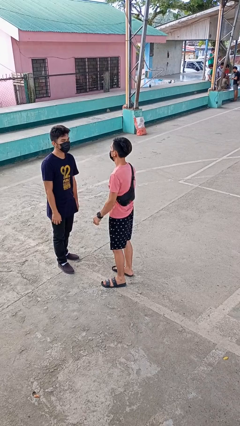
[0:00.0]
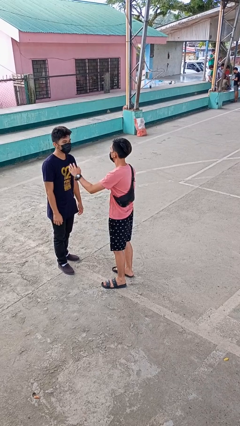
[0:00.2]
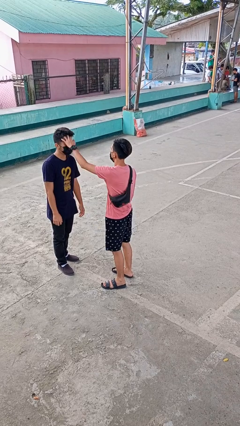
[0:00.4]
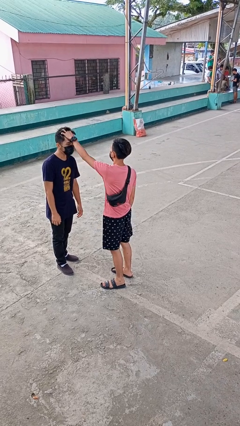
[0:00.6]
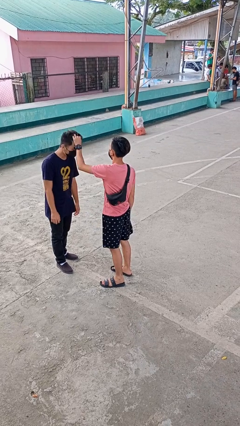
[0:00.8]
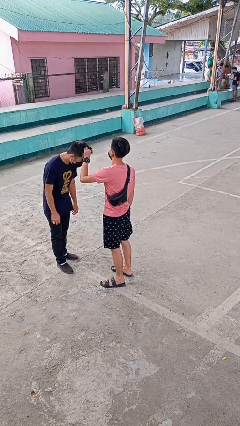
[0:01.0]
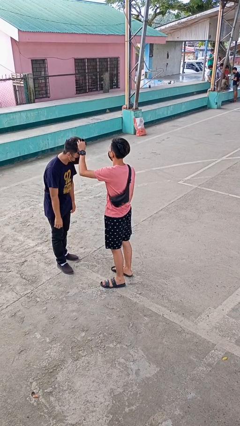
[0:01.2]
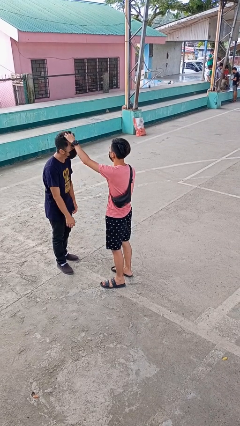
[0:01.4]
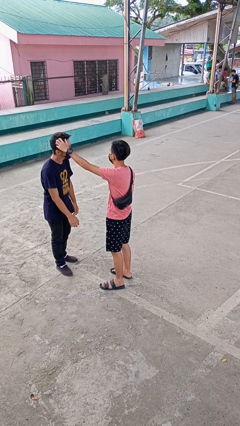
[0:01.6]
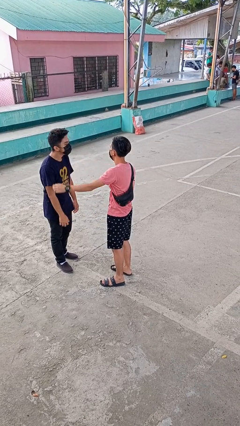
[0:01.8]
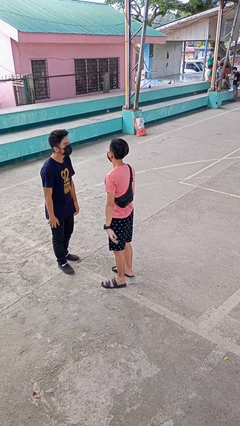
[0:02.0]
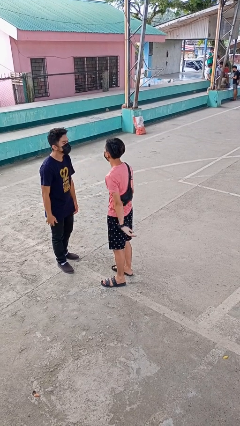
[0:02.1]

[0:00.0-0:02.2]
person grabs person by hair

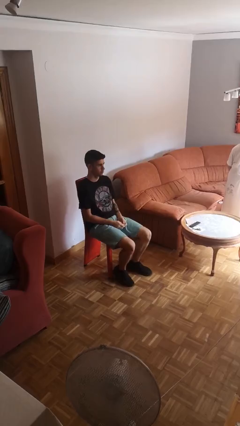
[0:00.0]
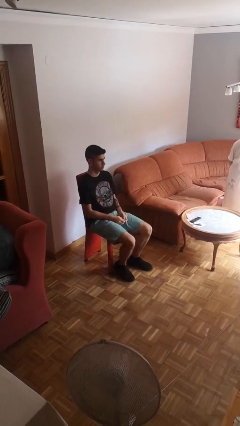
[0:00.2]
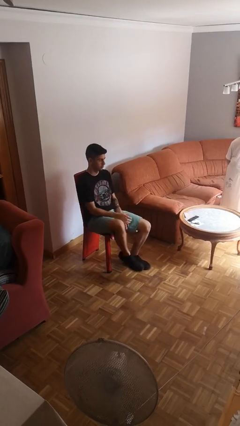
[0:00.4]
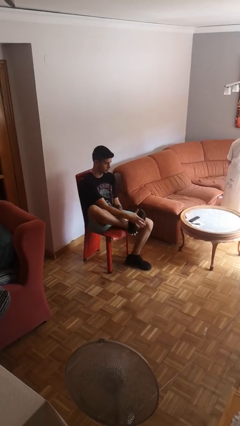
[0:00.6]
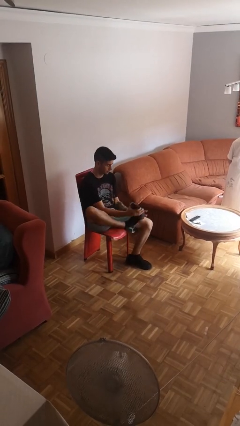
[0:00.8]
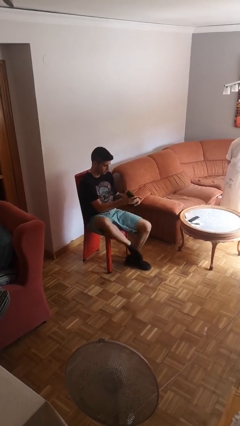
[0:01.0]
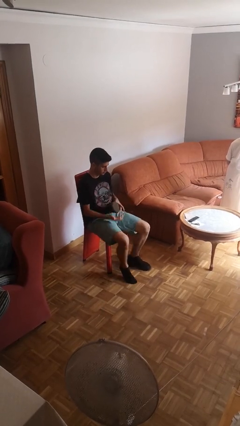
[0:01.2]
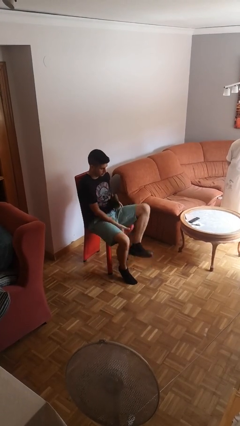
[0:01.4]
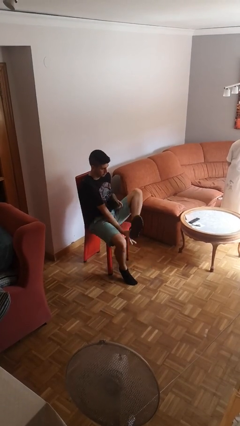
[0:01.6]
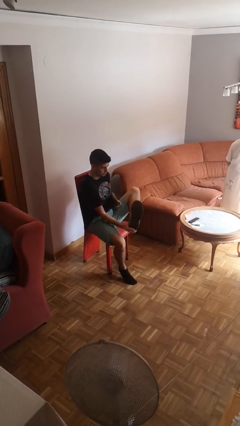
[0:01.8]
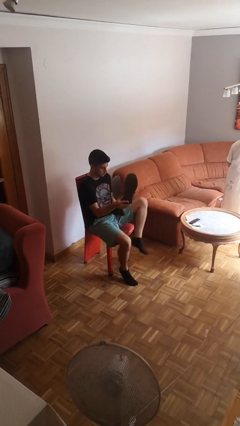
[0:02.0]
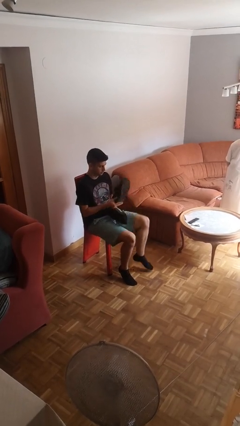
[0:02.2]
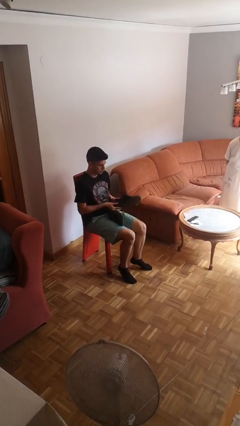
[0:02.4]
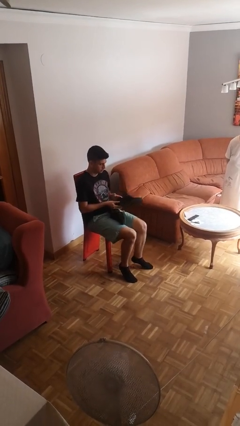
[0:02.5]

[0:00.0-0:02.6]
person takes off shoes

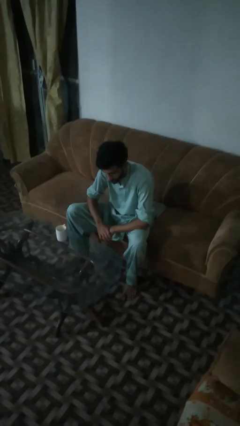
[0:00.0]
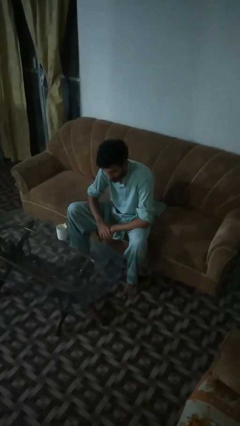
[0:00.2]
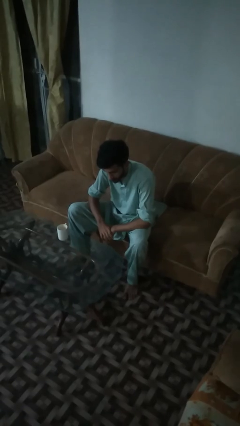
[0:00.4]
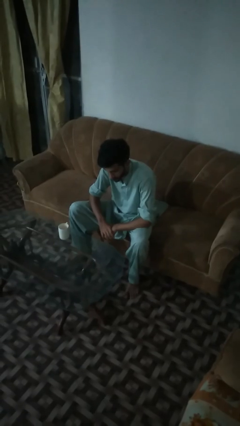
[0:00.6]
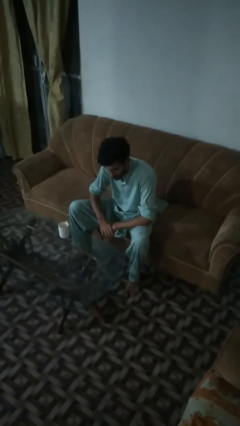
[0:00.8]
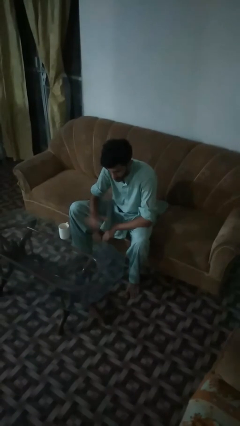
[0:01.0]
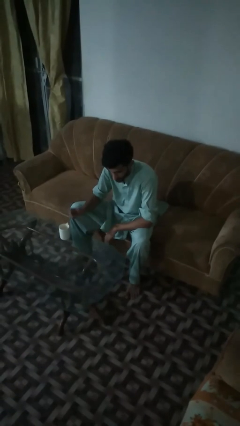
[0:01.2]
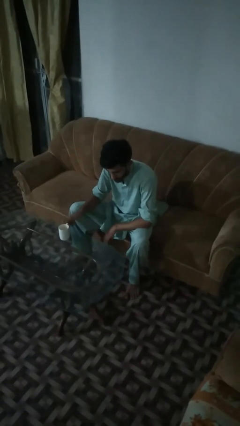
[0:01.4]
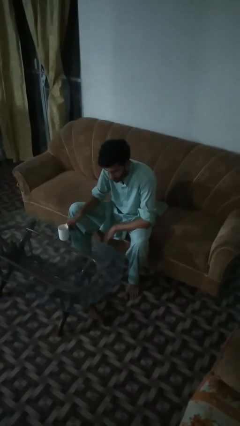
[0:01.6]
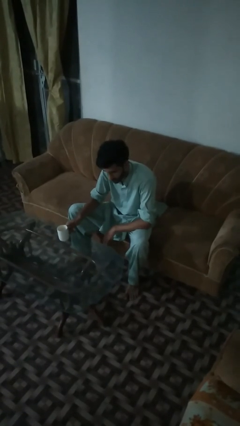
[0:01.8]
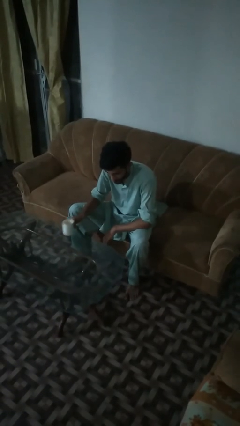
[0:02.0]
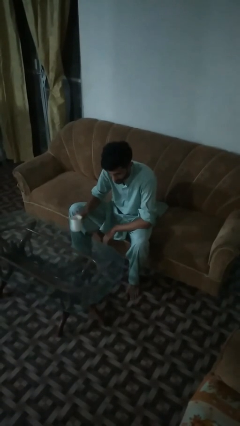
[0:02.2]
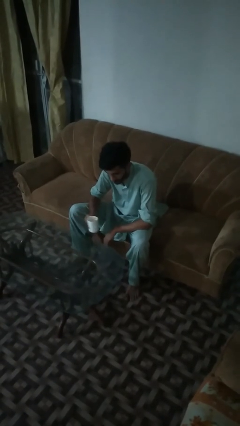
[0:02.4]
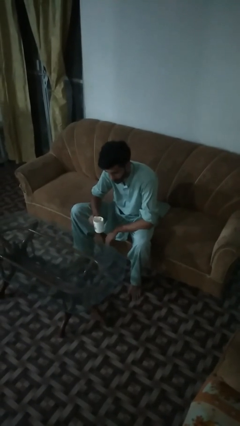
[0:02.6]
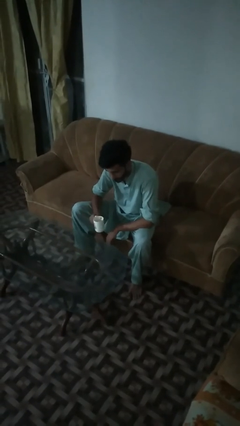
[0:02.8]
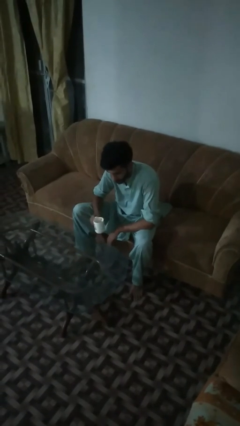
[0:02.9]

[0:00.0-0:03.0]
person picks up object from table

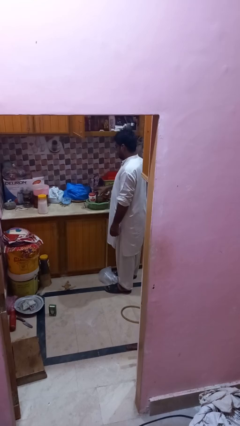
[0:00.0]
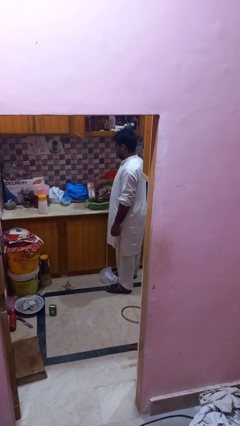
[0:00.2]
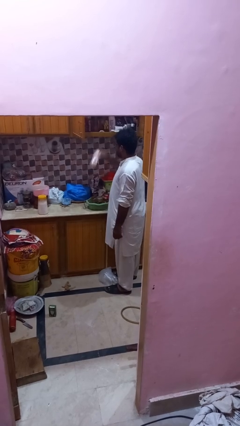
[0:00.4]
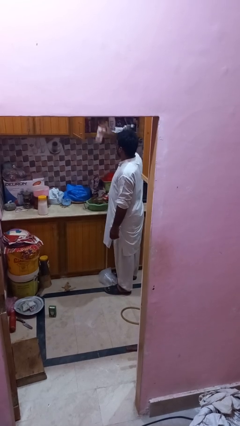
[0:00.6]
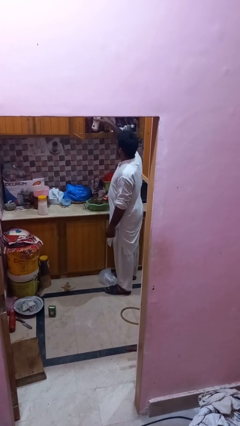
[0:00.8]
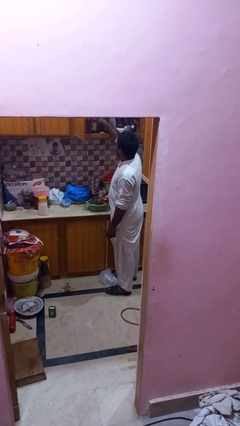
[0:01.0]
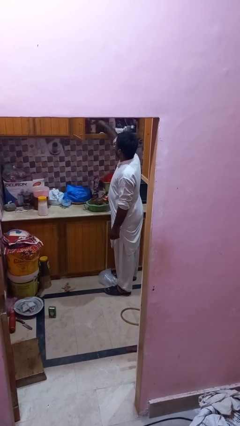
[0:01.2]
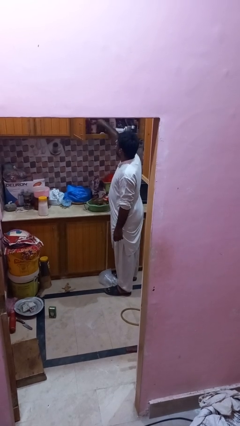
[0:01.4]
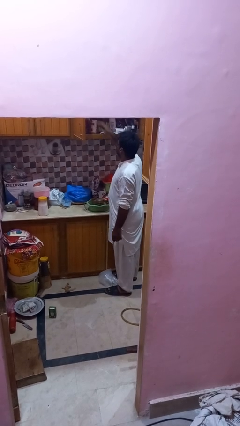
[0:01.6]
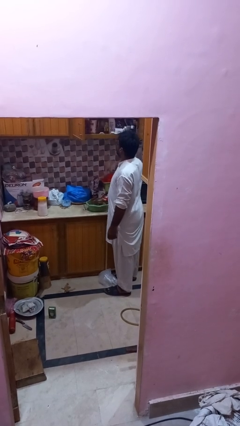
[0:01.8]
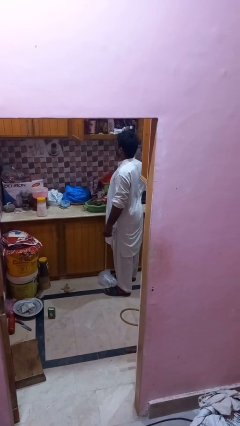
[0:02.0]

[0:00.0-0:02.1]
person loads groceries into cabinet

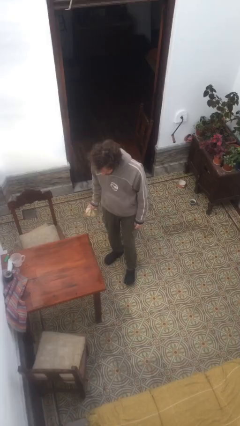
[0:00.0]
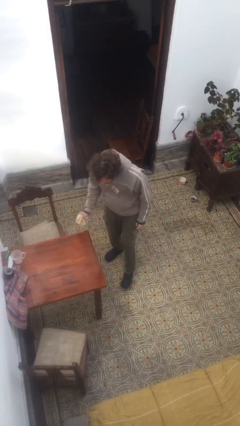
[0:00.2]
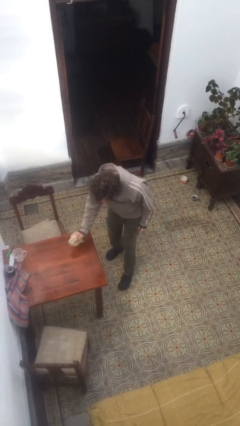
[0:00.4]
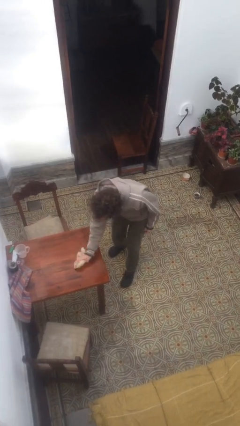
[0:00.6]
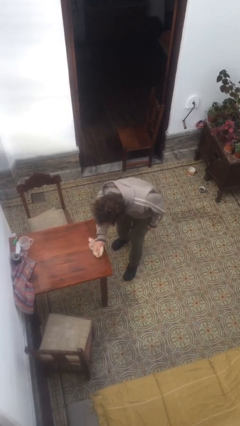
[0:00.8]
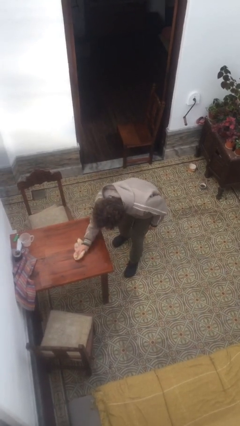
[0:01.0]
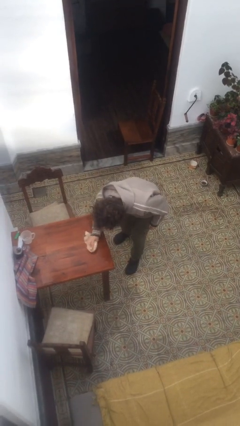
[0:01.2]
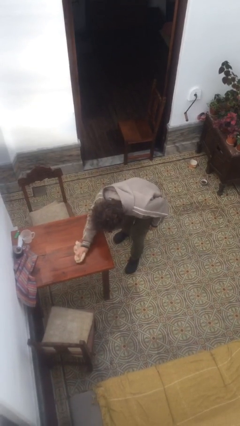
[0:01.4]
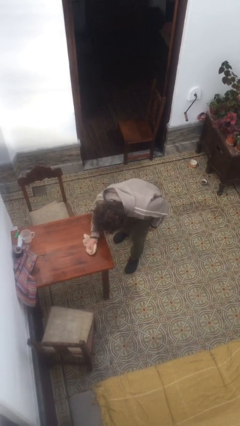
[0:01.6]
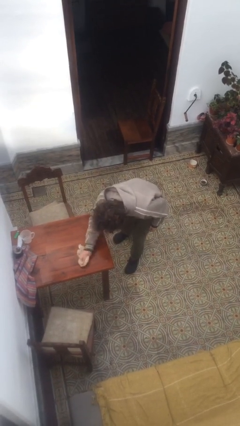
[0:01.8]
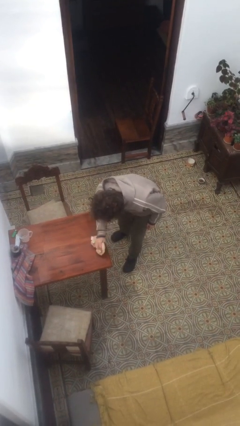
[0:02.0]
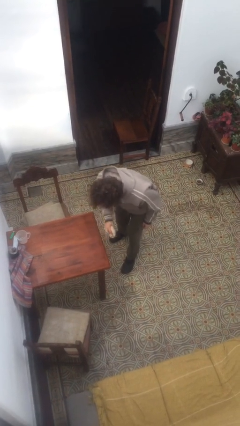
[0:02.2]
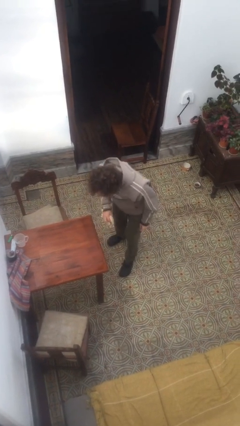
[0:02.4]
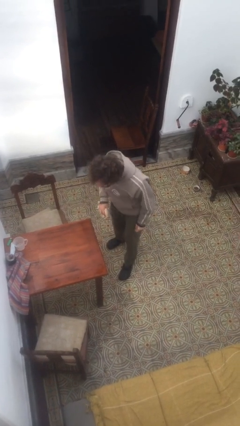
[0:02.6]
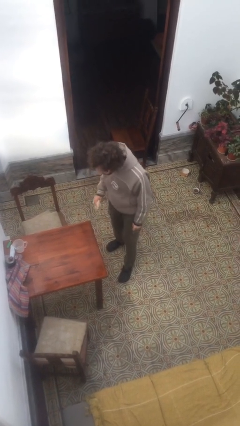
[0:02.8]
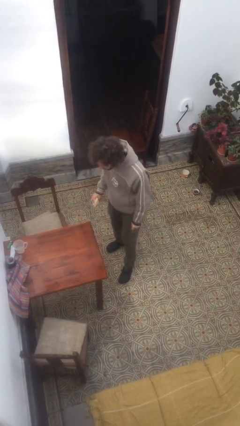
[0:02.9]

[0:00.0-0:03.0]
person cleans table with rag

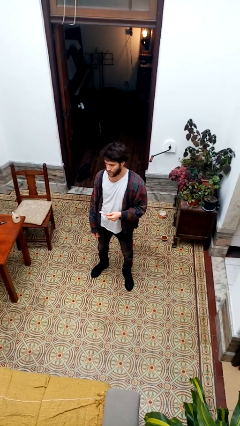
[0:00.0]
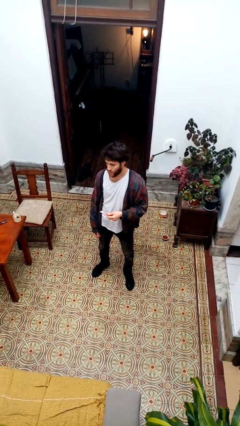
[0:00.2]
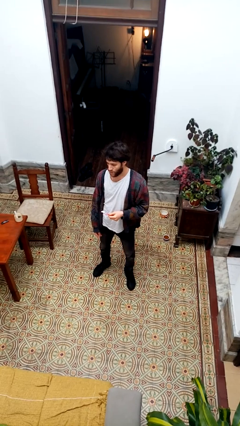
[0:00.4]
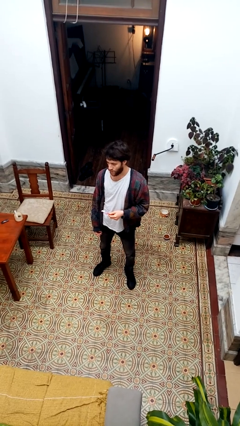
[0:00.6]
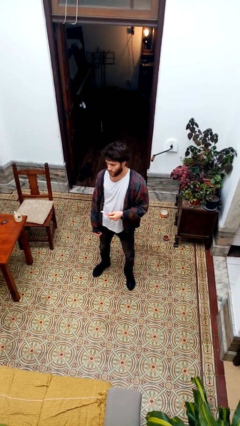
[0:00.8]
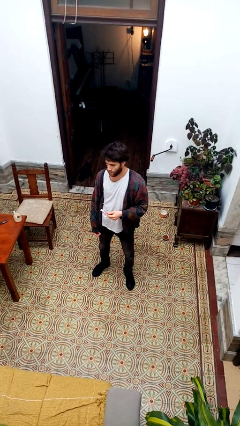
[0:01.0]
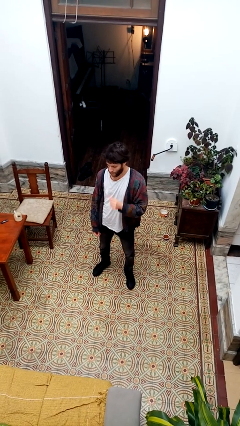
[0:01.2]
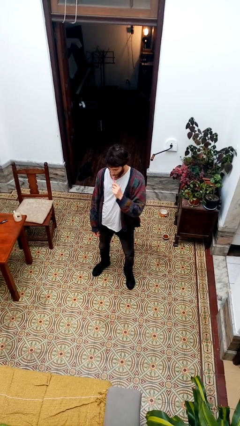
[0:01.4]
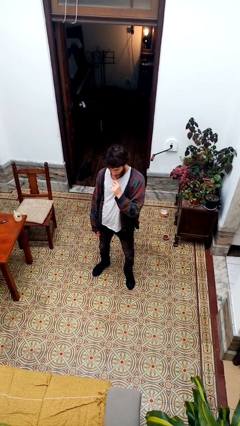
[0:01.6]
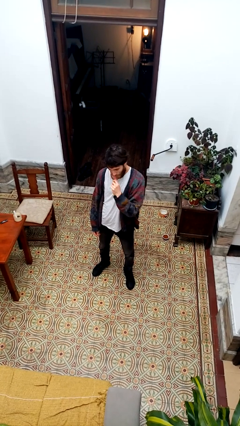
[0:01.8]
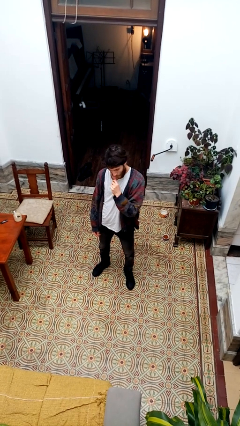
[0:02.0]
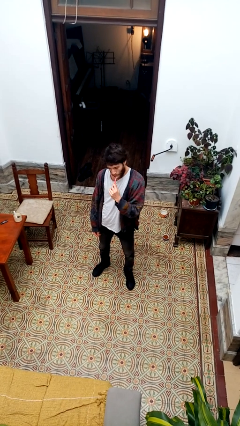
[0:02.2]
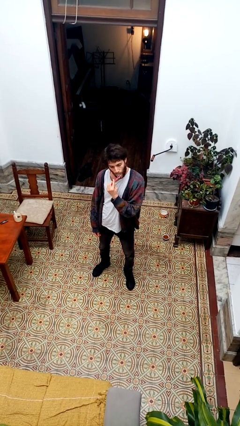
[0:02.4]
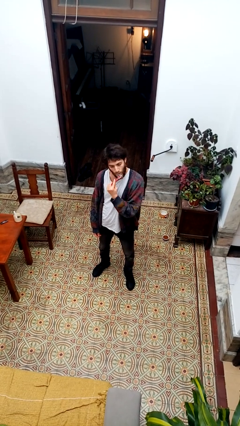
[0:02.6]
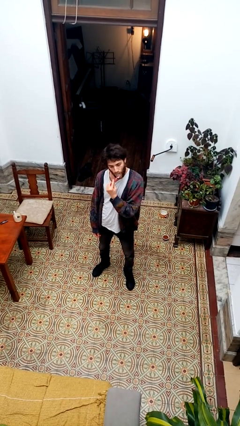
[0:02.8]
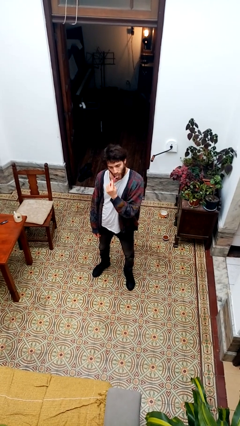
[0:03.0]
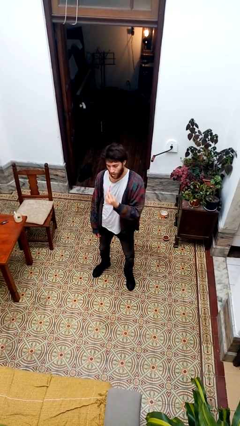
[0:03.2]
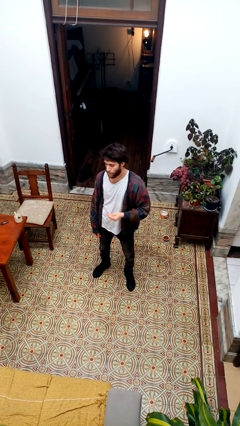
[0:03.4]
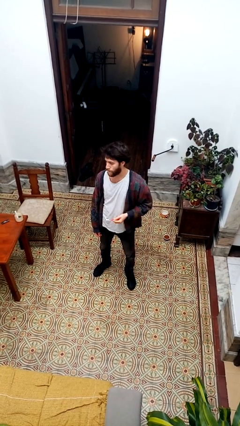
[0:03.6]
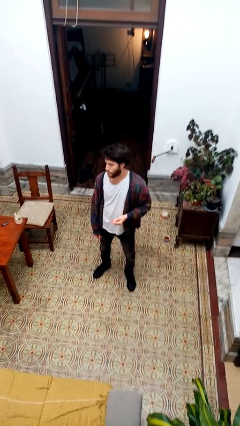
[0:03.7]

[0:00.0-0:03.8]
person brushes teeth

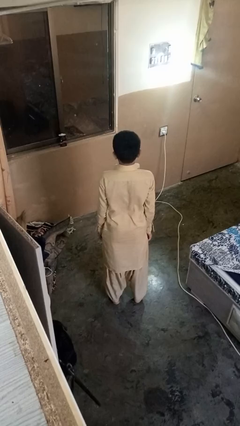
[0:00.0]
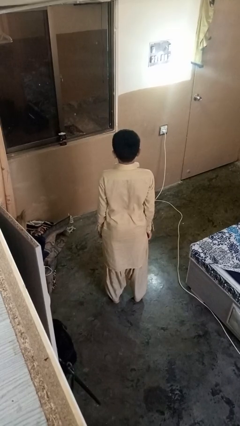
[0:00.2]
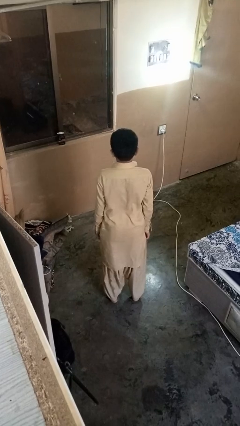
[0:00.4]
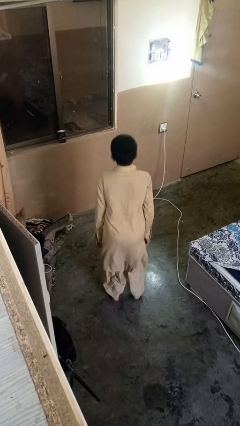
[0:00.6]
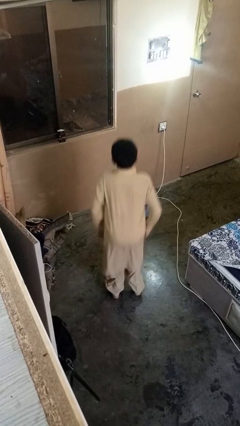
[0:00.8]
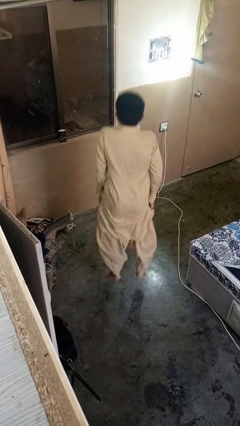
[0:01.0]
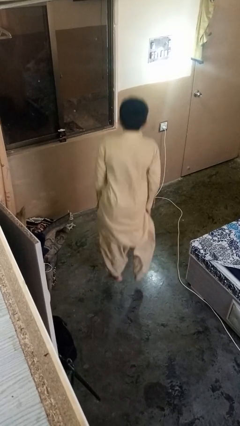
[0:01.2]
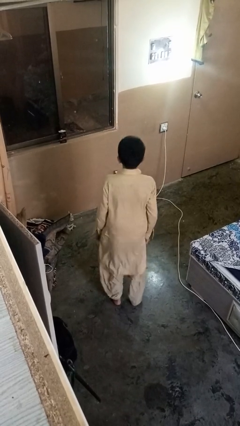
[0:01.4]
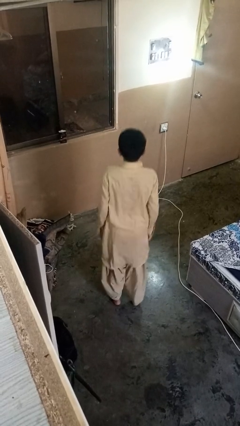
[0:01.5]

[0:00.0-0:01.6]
person jumps
